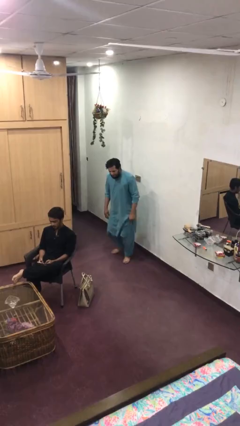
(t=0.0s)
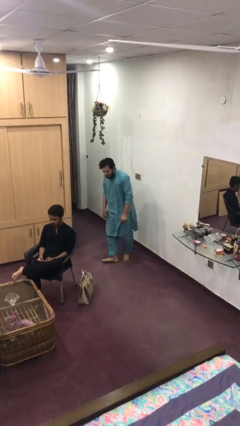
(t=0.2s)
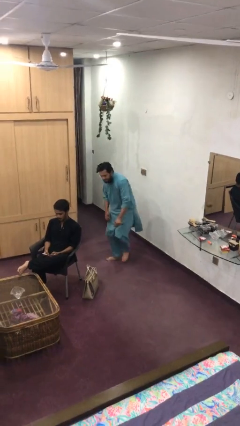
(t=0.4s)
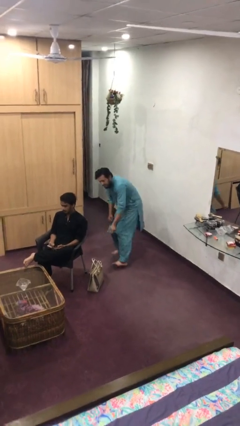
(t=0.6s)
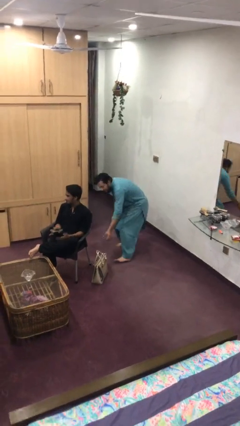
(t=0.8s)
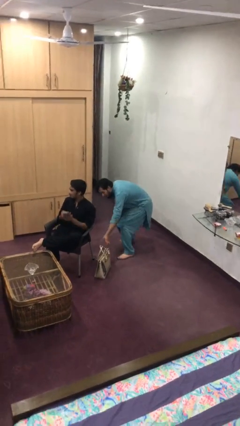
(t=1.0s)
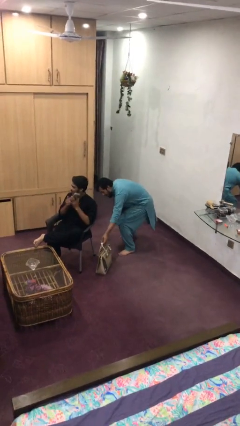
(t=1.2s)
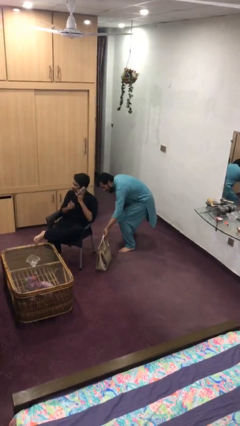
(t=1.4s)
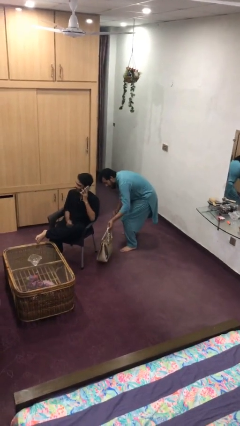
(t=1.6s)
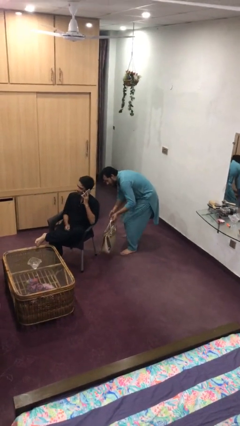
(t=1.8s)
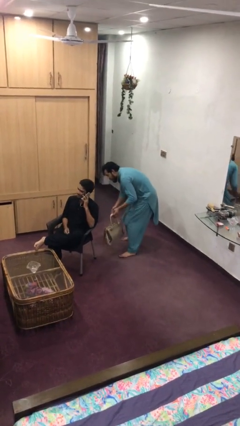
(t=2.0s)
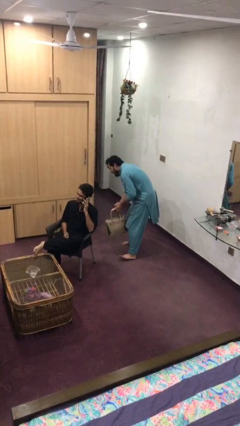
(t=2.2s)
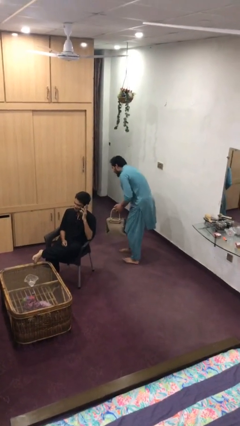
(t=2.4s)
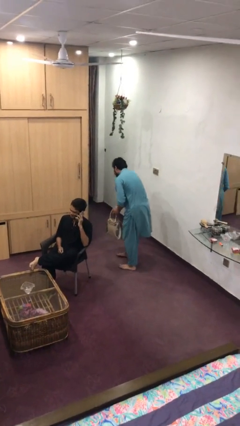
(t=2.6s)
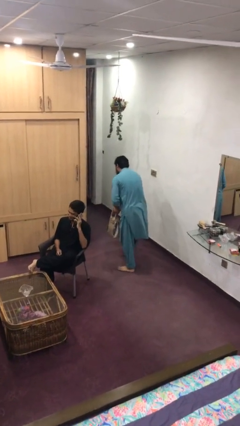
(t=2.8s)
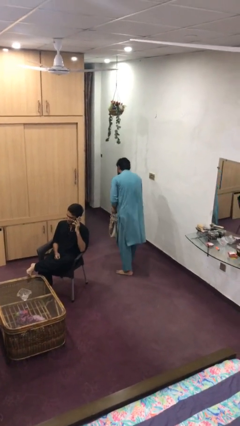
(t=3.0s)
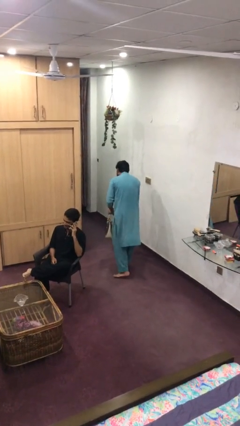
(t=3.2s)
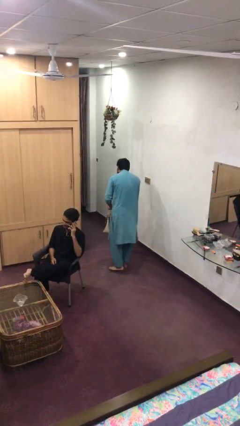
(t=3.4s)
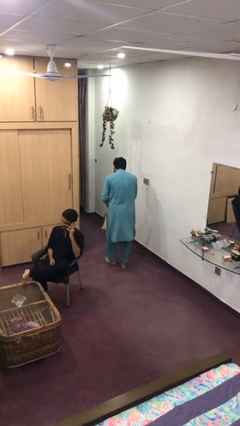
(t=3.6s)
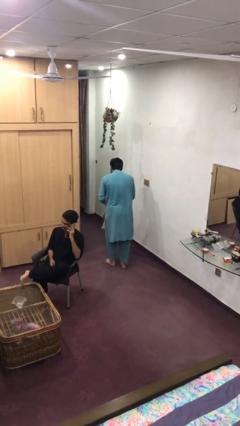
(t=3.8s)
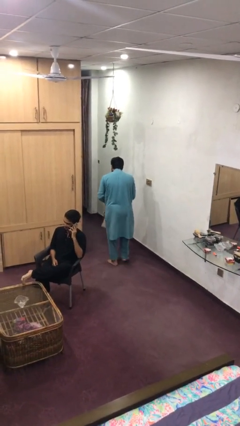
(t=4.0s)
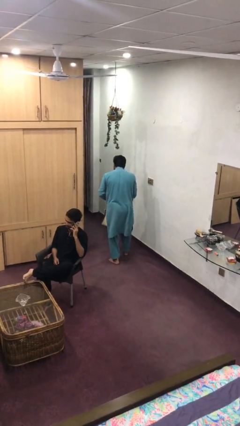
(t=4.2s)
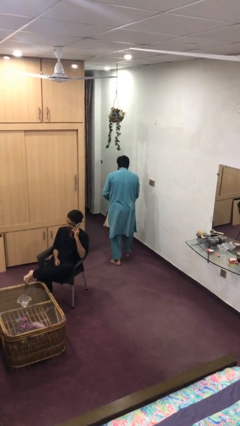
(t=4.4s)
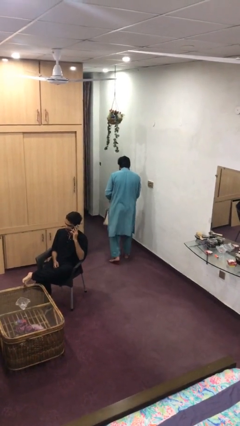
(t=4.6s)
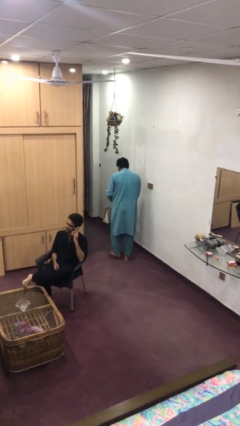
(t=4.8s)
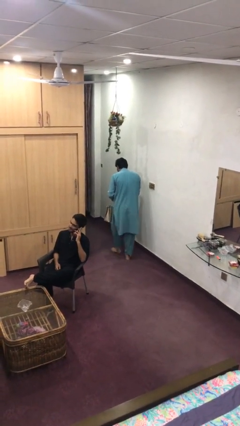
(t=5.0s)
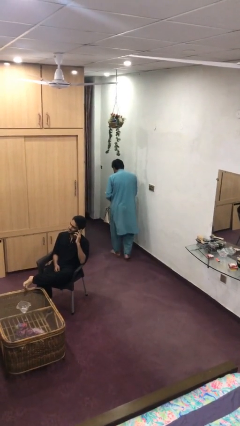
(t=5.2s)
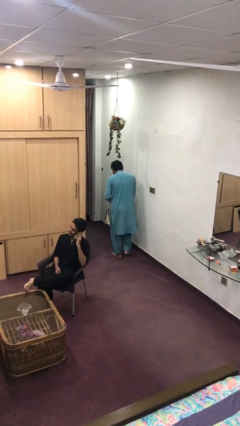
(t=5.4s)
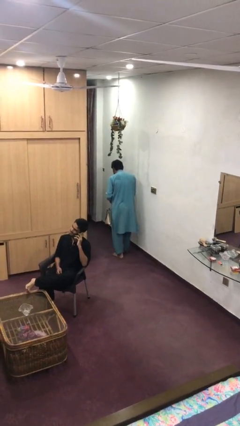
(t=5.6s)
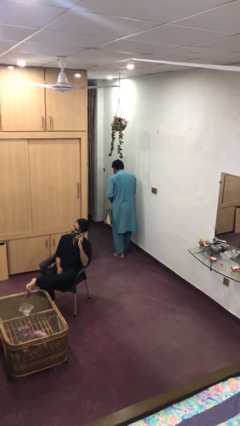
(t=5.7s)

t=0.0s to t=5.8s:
person steals object from person

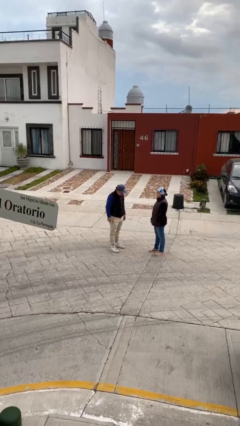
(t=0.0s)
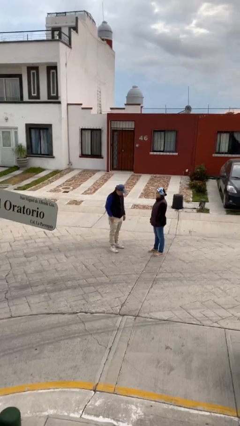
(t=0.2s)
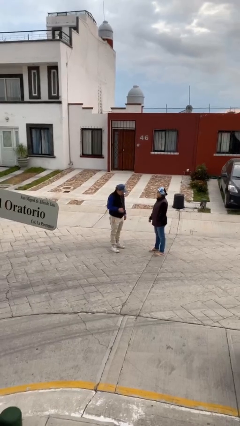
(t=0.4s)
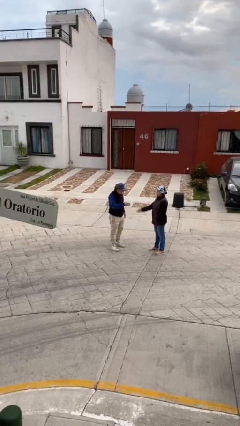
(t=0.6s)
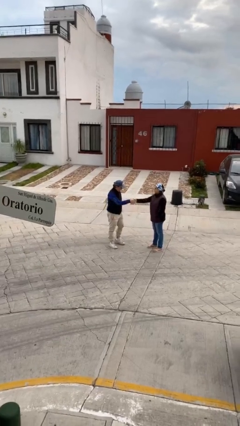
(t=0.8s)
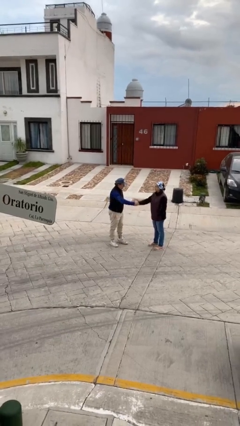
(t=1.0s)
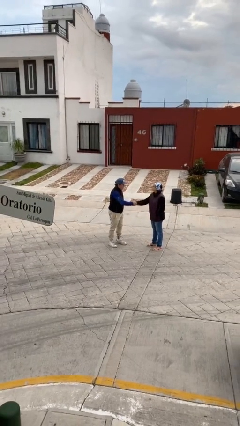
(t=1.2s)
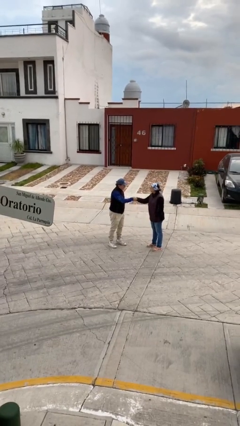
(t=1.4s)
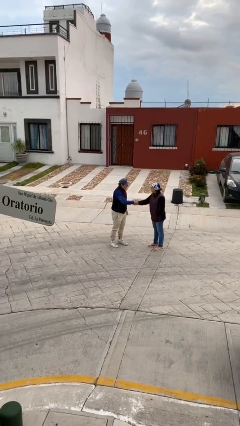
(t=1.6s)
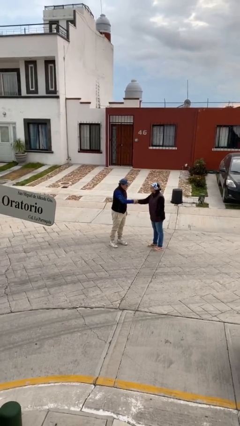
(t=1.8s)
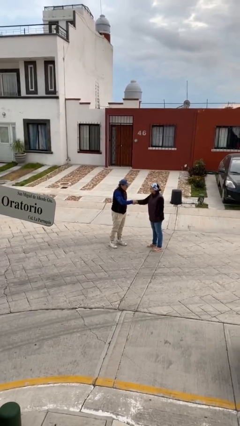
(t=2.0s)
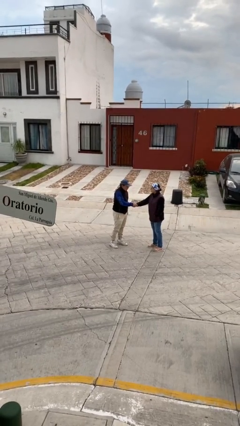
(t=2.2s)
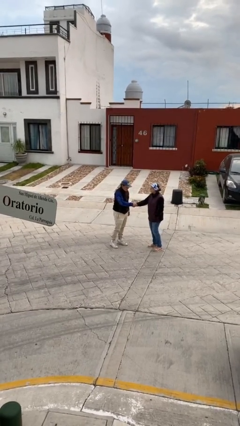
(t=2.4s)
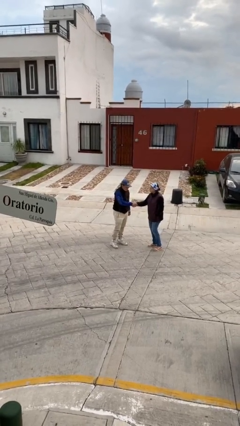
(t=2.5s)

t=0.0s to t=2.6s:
person shakes hand

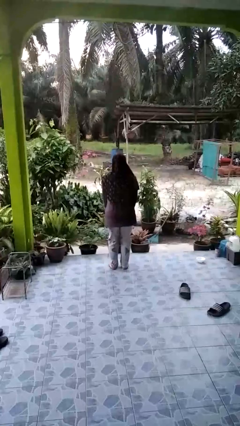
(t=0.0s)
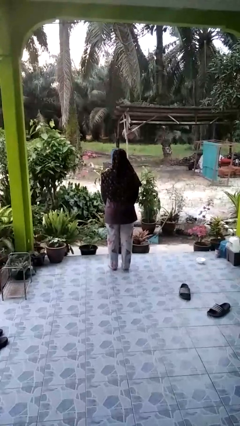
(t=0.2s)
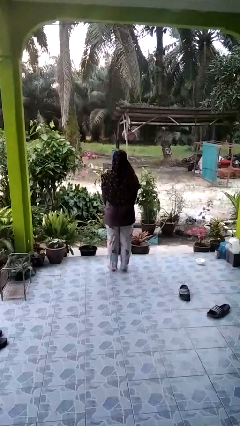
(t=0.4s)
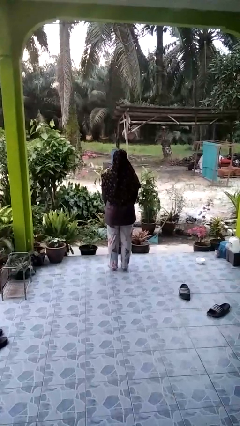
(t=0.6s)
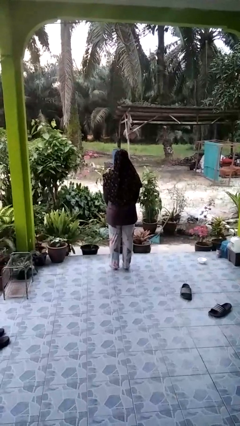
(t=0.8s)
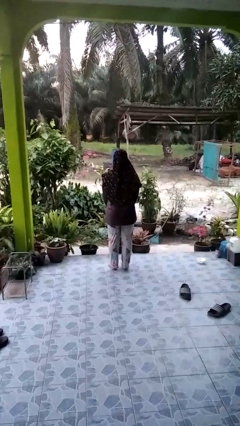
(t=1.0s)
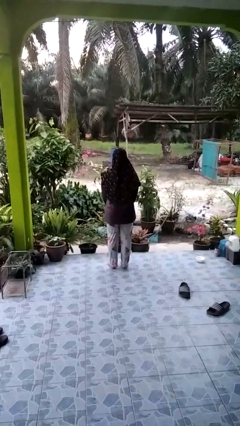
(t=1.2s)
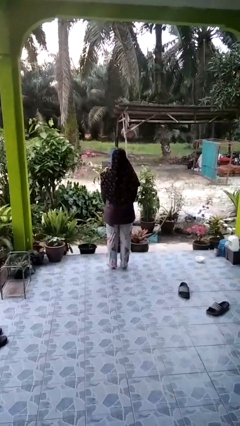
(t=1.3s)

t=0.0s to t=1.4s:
person stands up

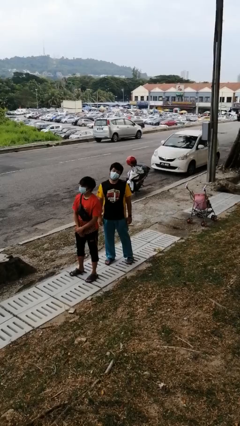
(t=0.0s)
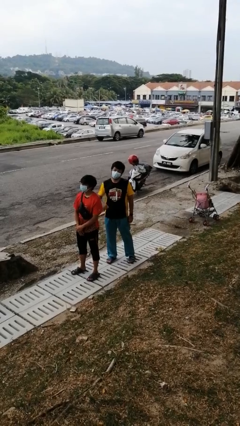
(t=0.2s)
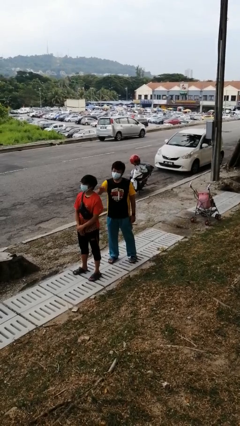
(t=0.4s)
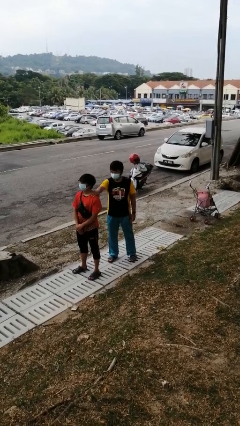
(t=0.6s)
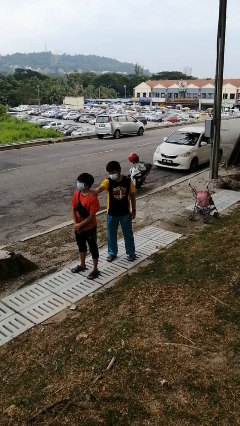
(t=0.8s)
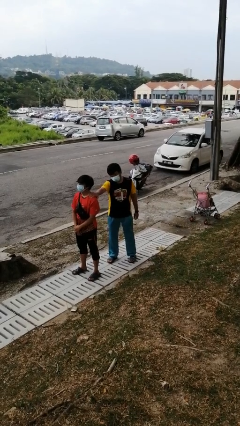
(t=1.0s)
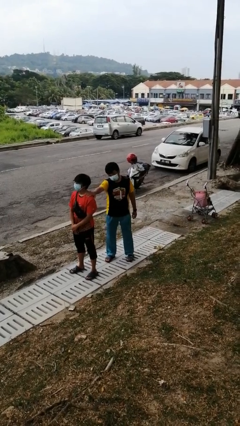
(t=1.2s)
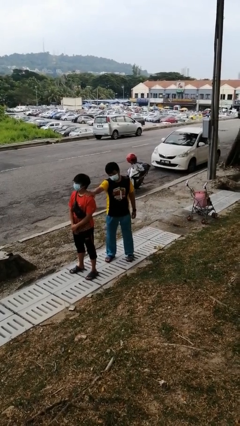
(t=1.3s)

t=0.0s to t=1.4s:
person grabs person by shoulder

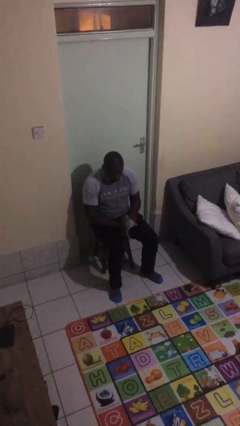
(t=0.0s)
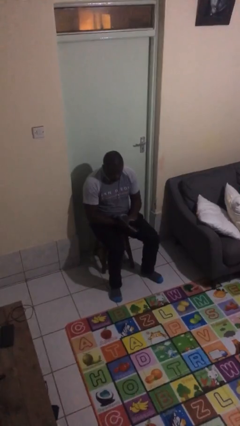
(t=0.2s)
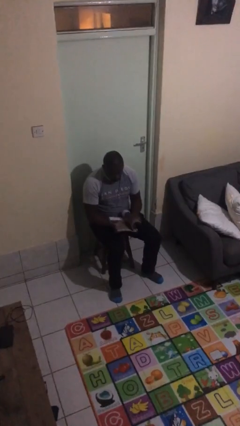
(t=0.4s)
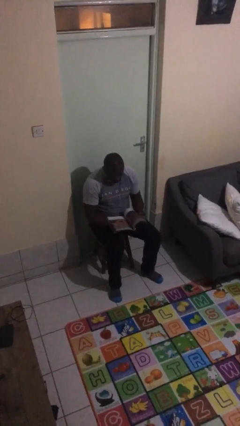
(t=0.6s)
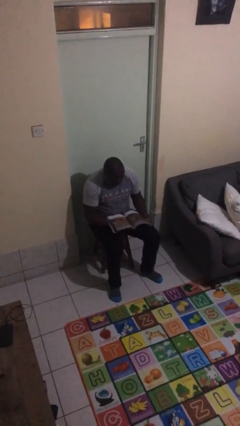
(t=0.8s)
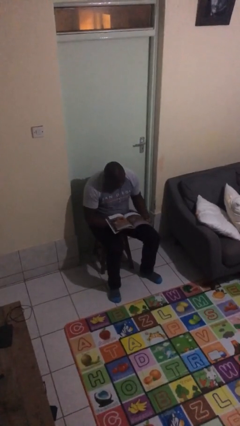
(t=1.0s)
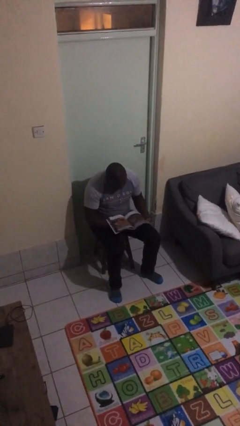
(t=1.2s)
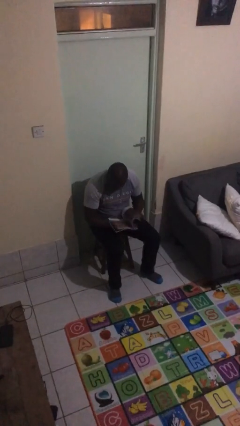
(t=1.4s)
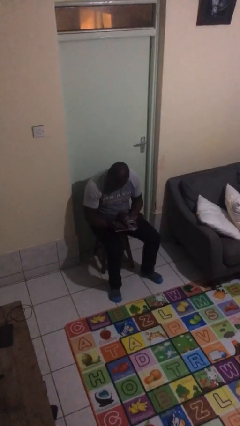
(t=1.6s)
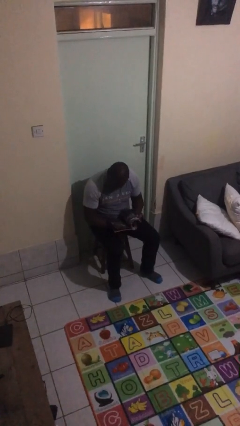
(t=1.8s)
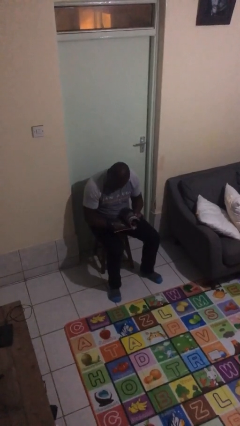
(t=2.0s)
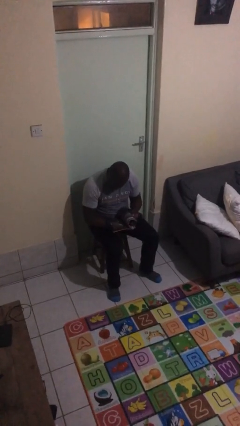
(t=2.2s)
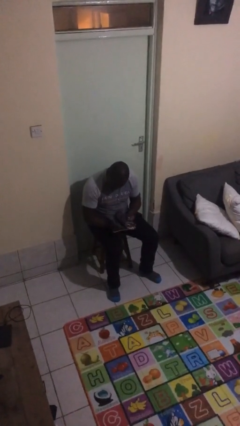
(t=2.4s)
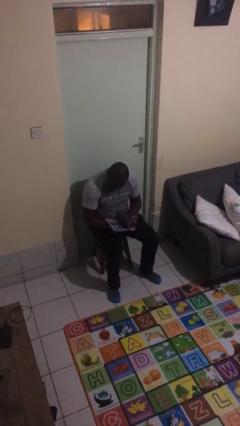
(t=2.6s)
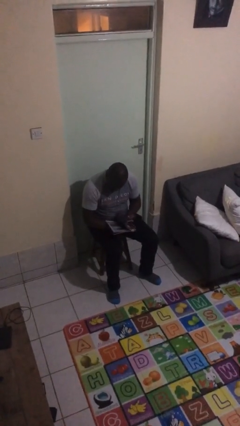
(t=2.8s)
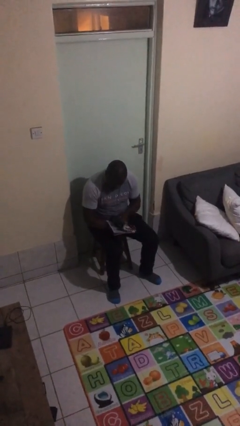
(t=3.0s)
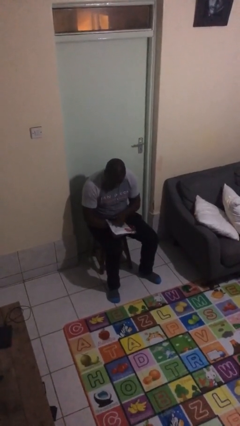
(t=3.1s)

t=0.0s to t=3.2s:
person reads magazine

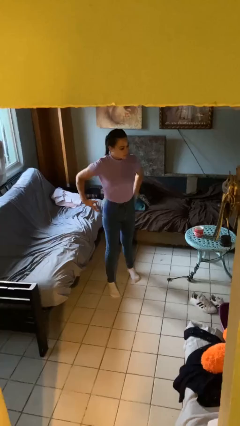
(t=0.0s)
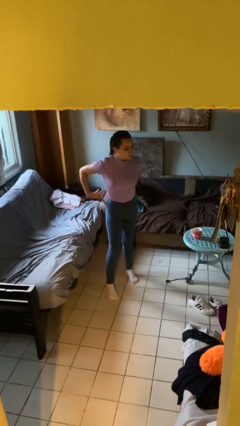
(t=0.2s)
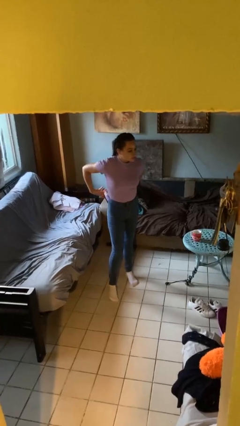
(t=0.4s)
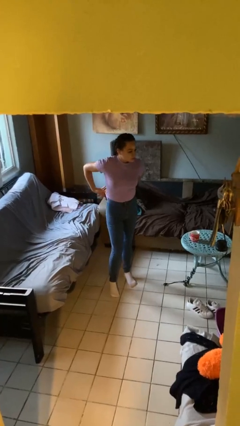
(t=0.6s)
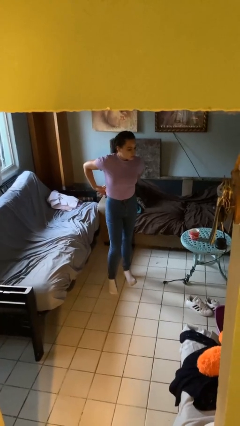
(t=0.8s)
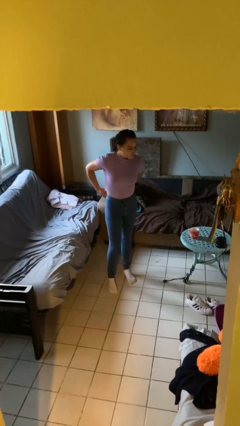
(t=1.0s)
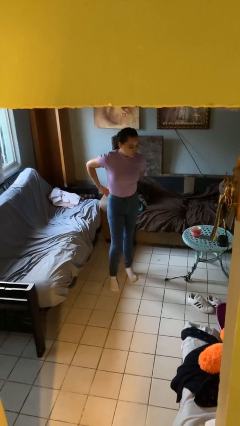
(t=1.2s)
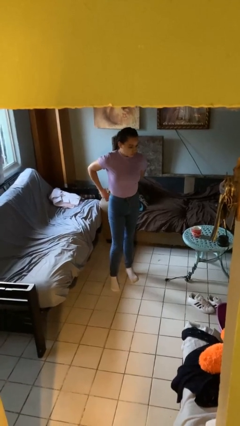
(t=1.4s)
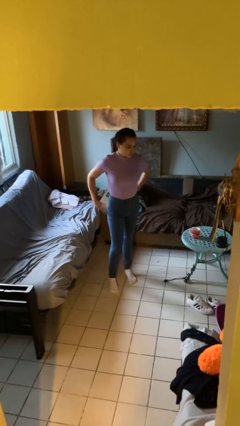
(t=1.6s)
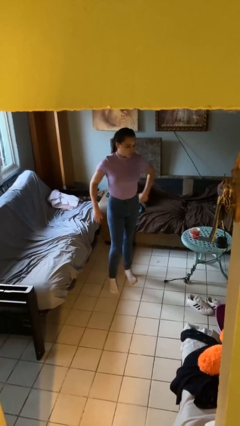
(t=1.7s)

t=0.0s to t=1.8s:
person puts phone into pocket

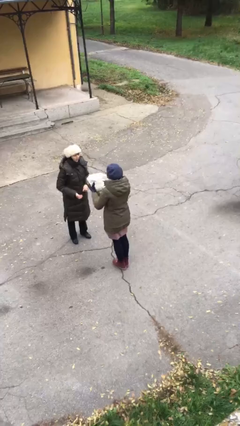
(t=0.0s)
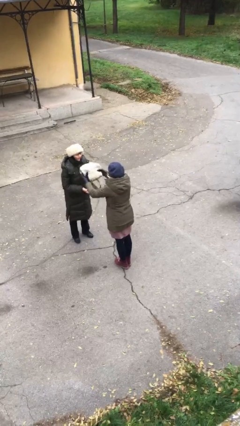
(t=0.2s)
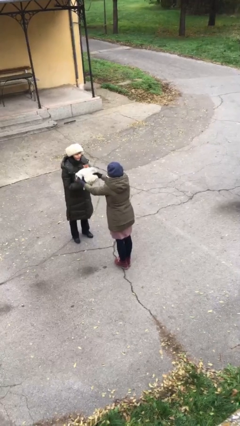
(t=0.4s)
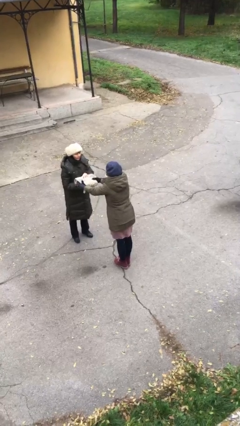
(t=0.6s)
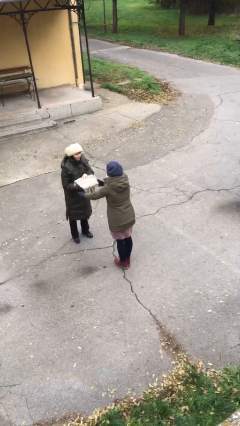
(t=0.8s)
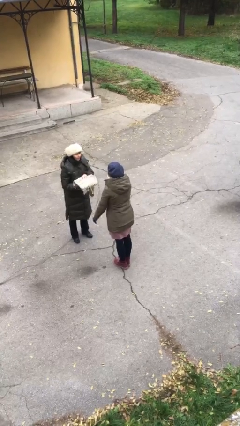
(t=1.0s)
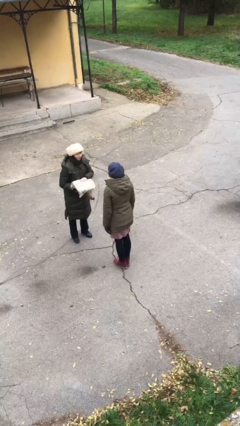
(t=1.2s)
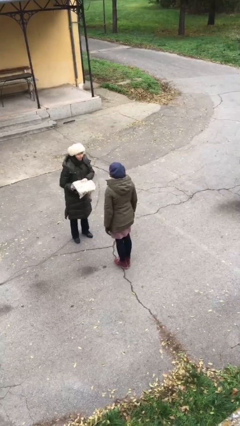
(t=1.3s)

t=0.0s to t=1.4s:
person transfers object to person
